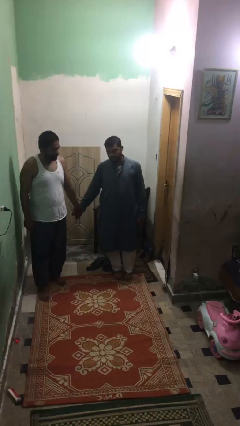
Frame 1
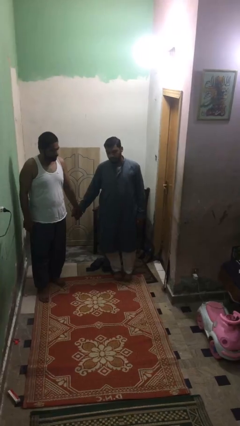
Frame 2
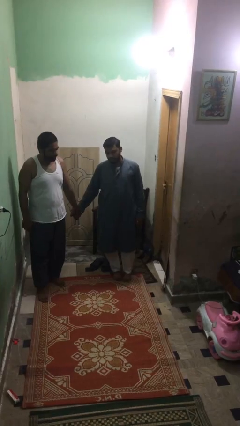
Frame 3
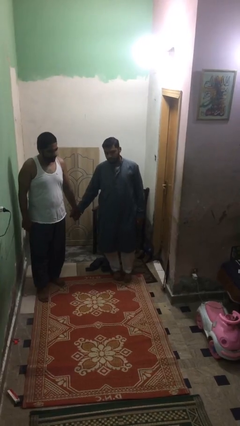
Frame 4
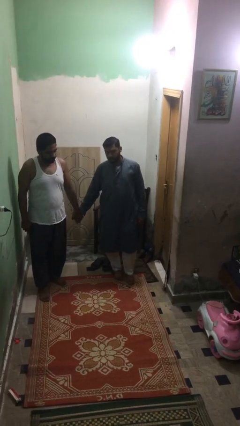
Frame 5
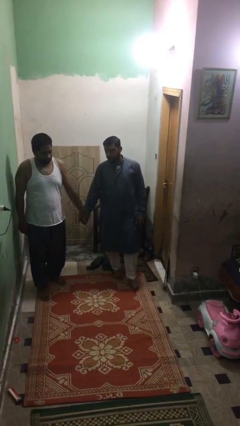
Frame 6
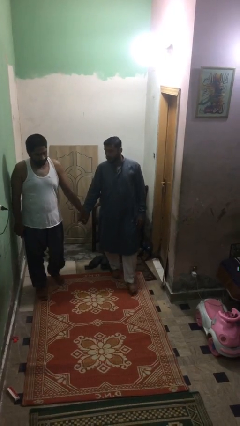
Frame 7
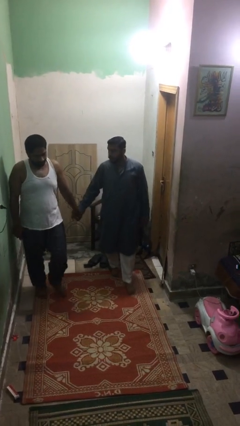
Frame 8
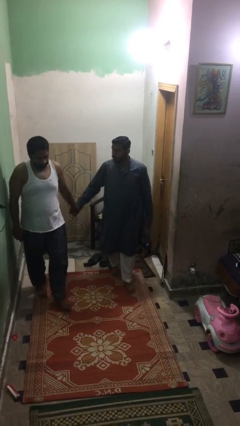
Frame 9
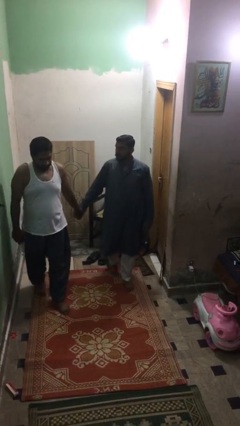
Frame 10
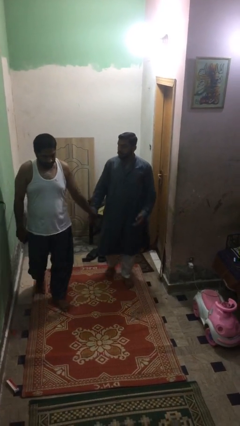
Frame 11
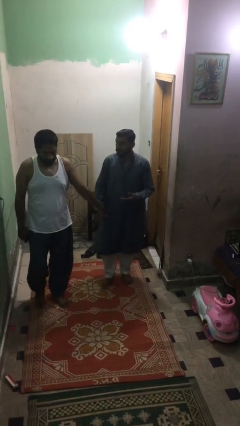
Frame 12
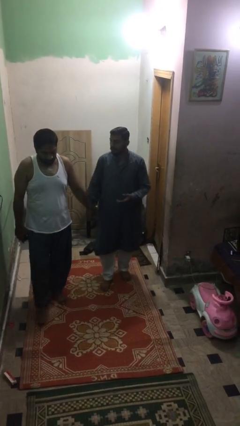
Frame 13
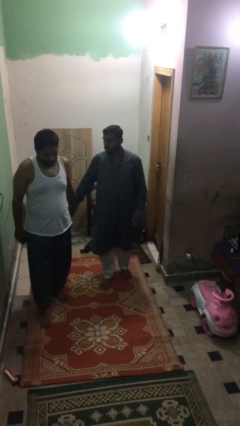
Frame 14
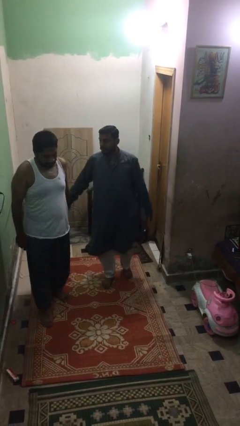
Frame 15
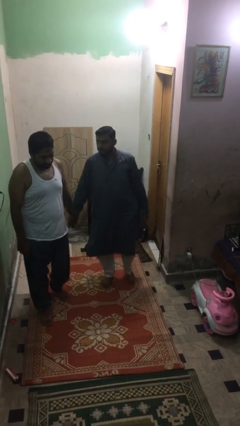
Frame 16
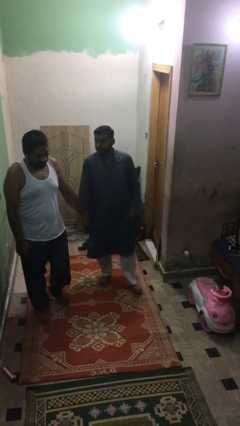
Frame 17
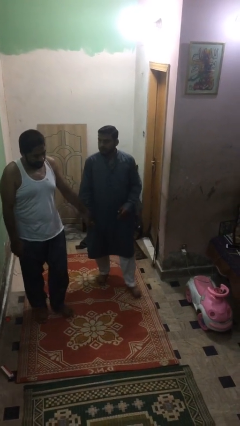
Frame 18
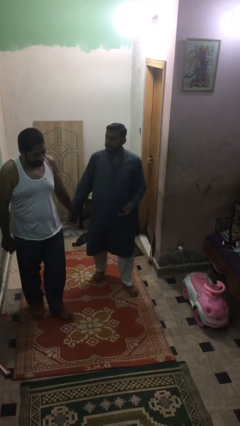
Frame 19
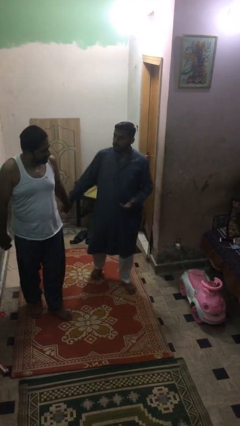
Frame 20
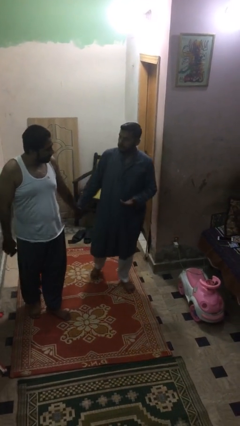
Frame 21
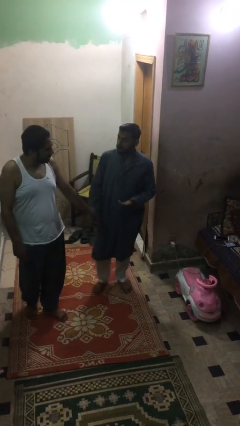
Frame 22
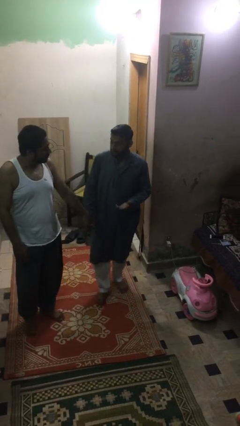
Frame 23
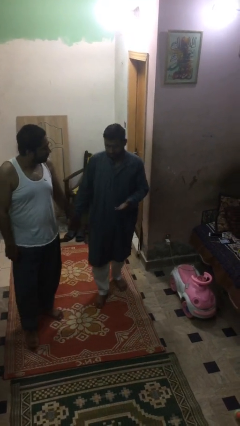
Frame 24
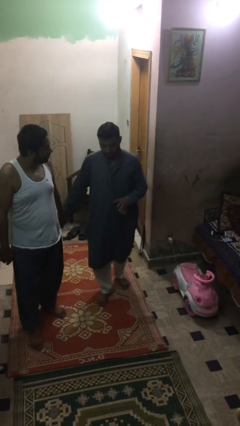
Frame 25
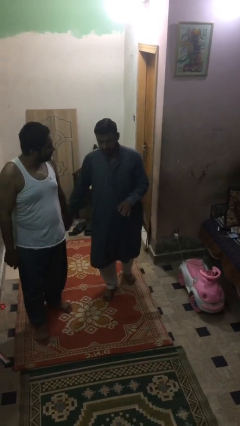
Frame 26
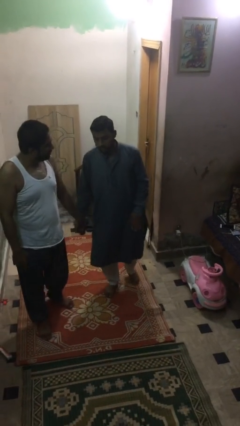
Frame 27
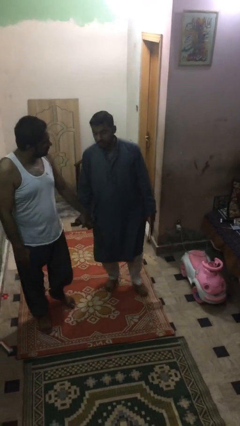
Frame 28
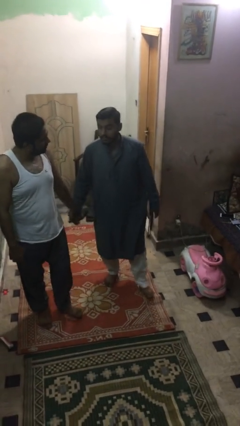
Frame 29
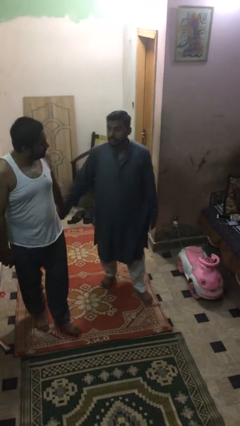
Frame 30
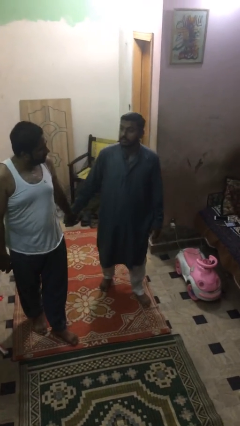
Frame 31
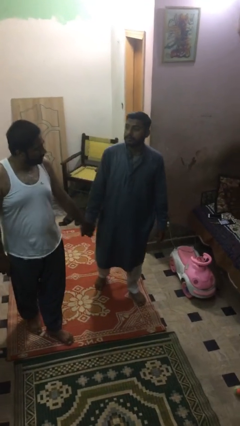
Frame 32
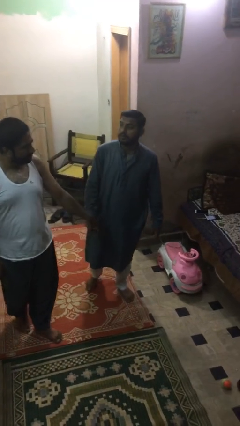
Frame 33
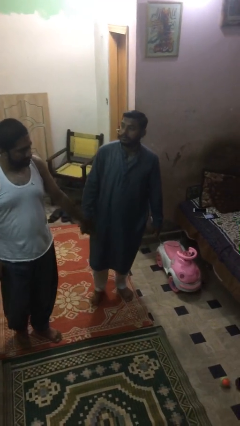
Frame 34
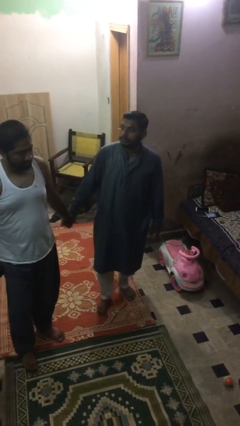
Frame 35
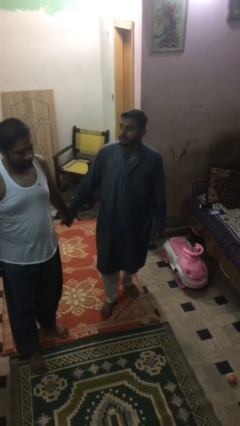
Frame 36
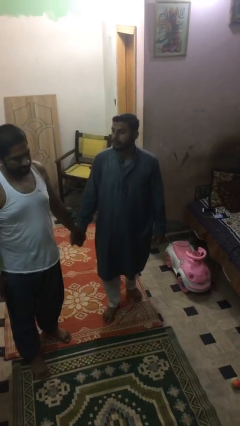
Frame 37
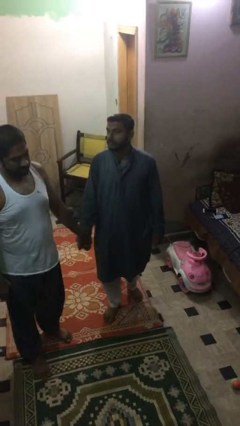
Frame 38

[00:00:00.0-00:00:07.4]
person holds hand

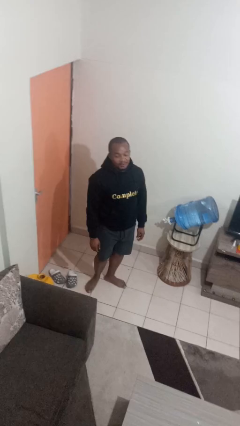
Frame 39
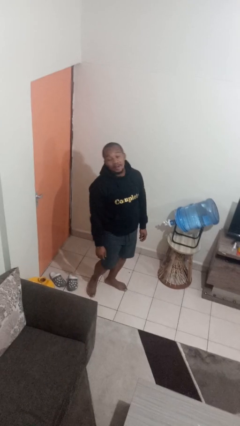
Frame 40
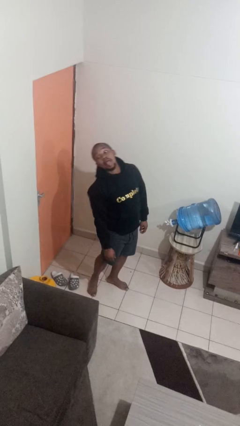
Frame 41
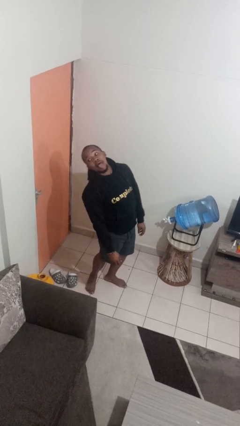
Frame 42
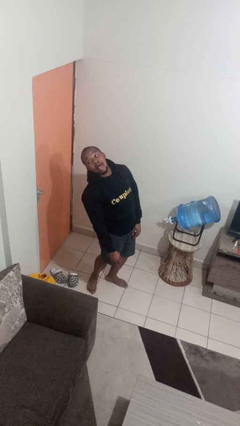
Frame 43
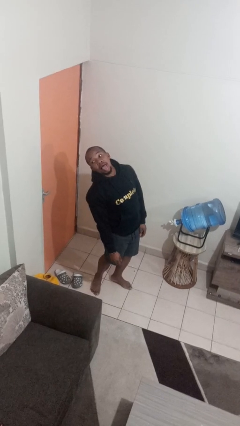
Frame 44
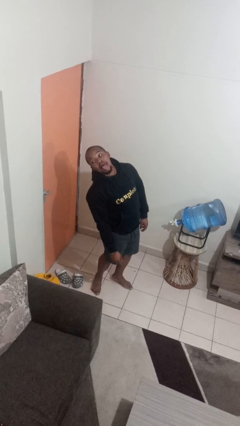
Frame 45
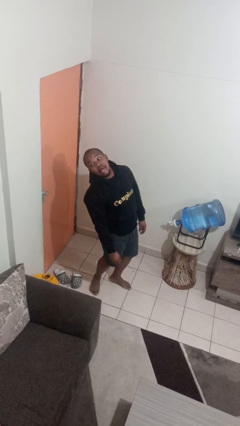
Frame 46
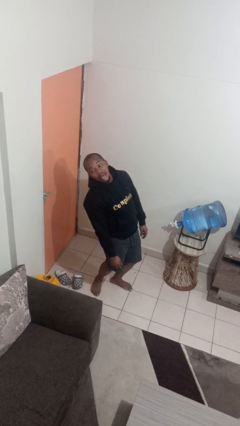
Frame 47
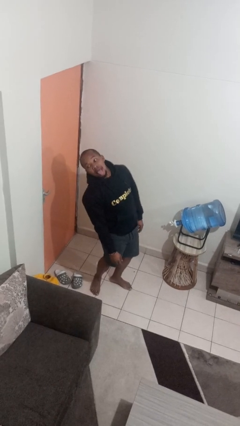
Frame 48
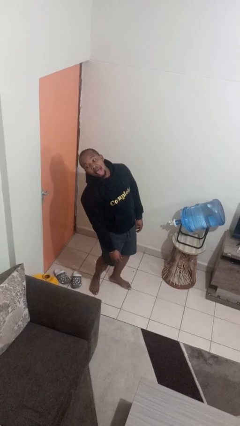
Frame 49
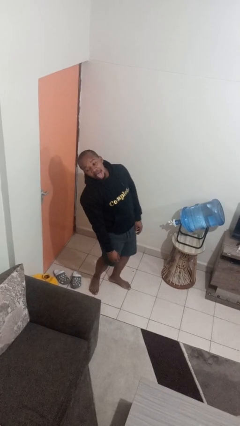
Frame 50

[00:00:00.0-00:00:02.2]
person sticks out tongue

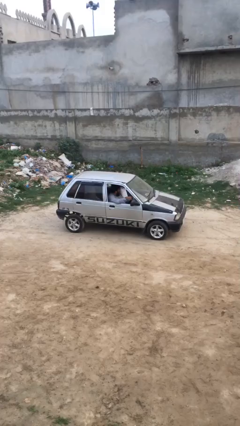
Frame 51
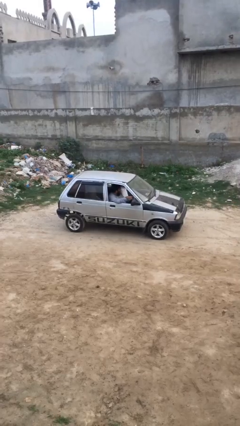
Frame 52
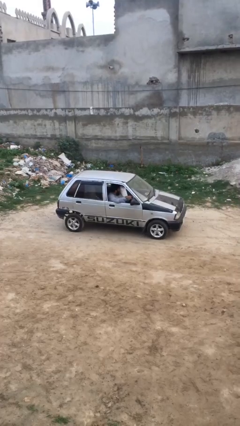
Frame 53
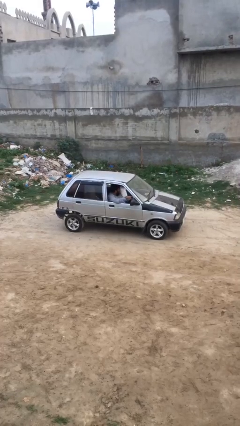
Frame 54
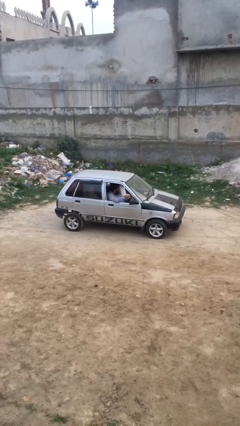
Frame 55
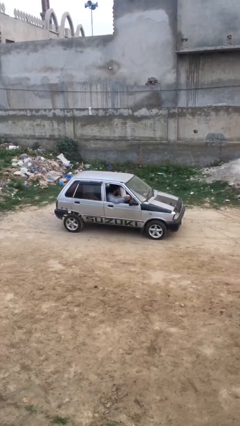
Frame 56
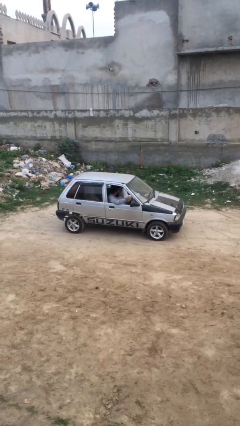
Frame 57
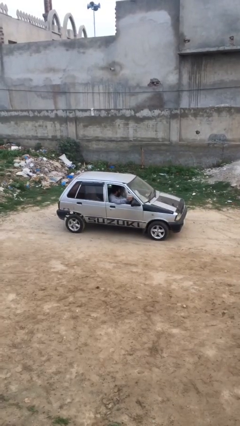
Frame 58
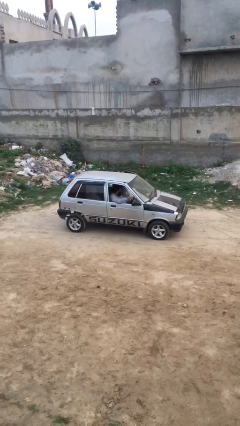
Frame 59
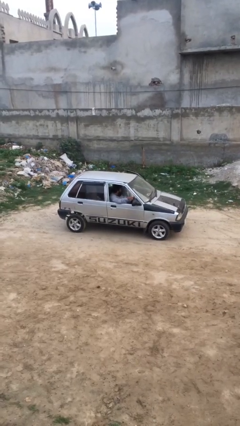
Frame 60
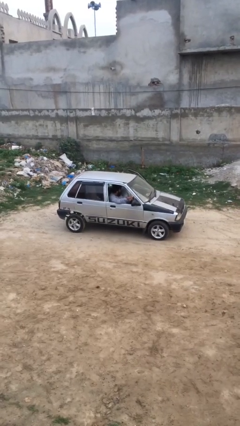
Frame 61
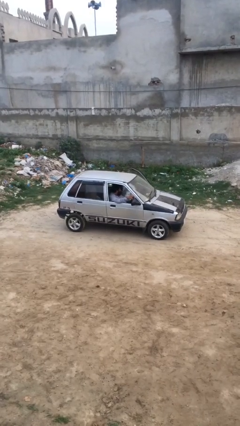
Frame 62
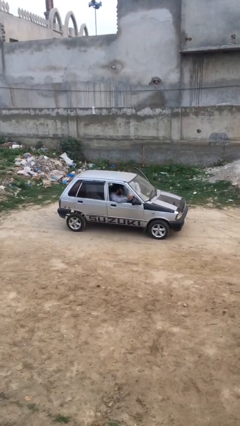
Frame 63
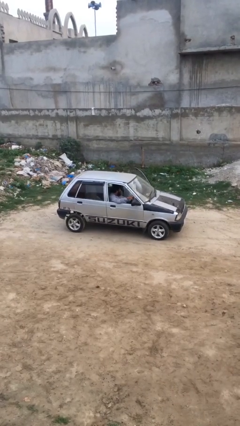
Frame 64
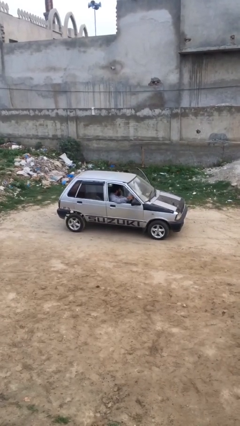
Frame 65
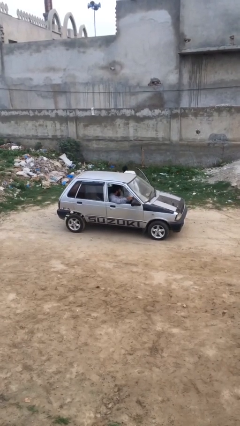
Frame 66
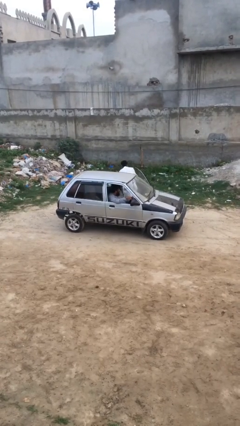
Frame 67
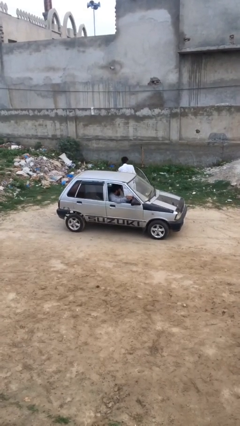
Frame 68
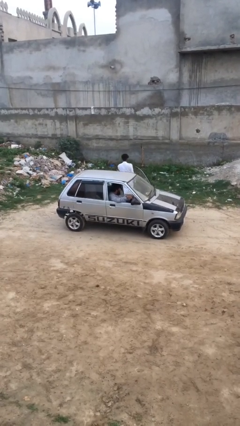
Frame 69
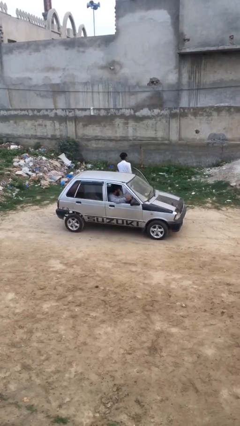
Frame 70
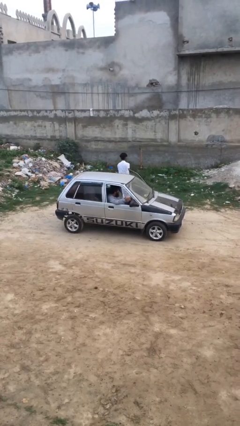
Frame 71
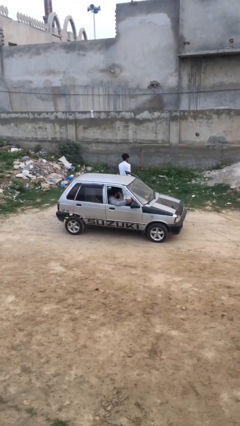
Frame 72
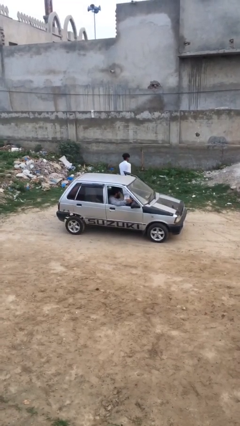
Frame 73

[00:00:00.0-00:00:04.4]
car drops off person

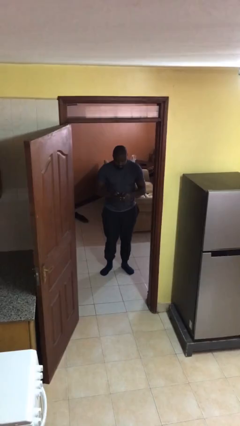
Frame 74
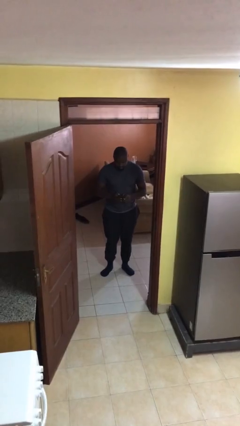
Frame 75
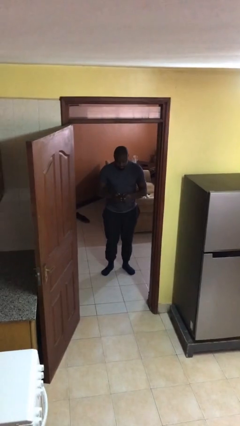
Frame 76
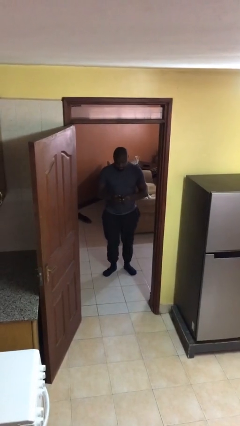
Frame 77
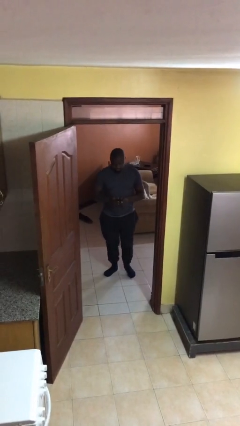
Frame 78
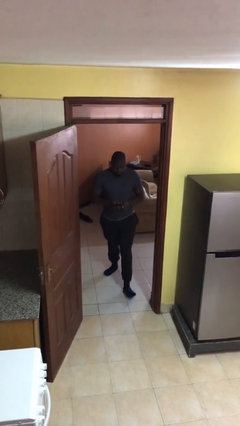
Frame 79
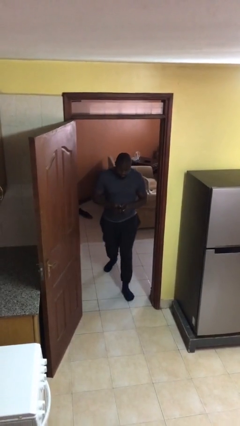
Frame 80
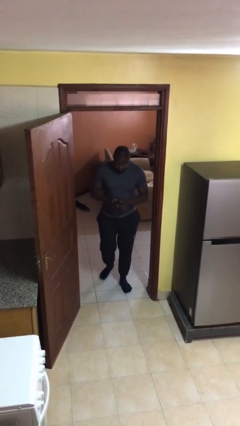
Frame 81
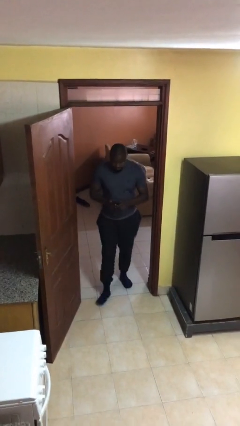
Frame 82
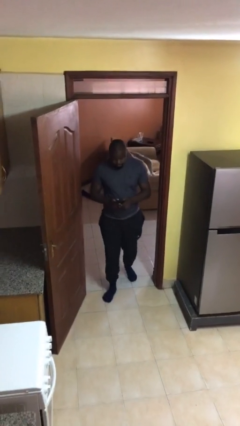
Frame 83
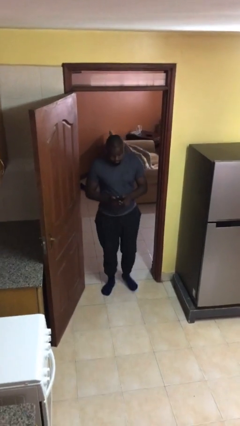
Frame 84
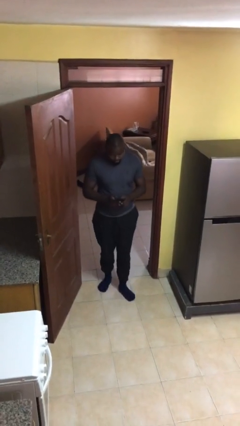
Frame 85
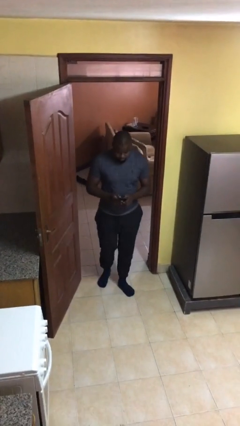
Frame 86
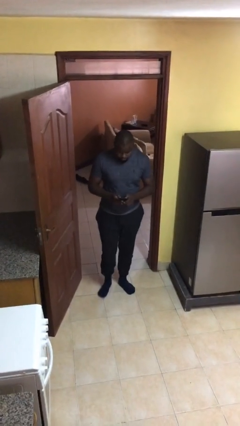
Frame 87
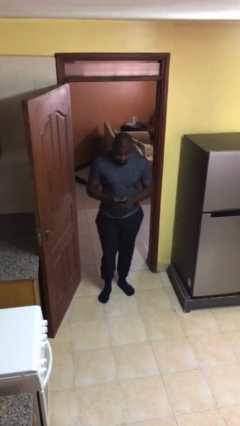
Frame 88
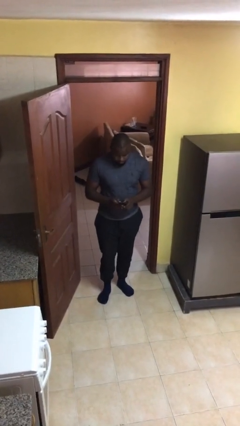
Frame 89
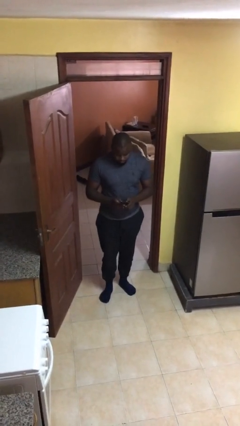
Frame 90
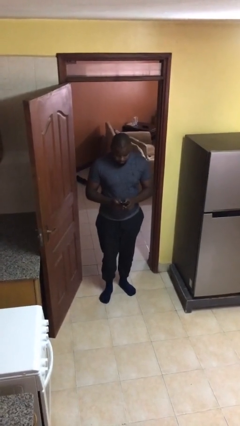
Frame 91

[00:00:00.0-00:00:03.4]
person enters scene through structure
